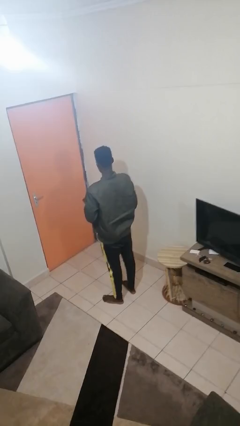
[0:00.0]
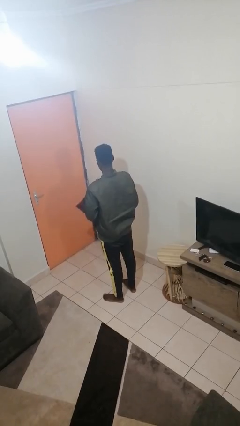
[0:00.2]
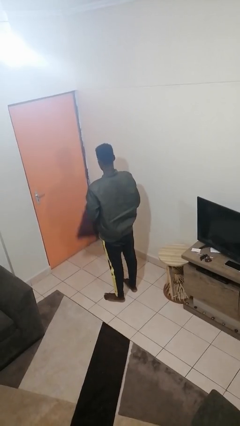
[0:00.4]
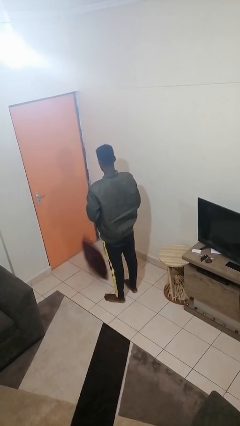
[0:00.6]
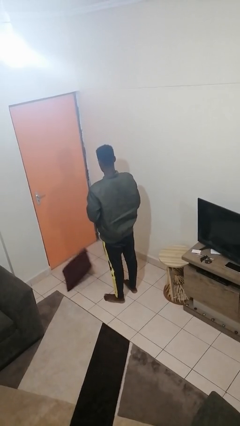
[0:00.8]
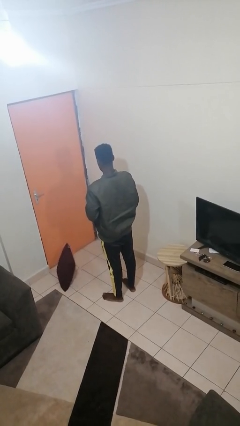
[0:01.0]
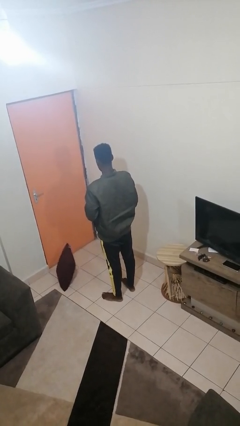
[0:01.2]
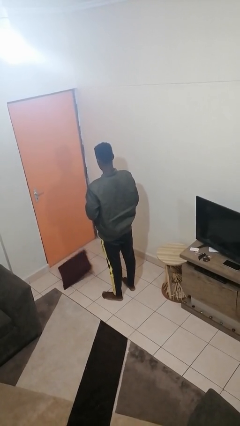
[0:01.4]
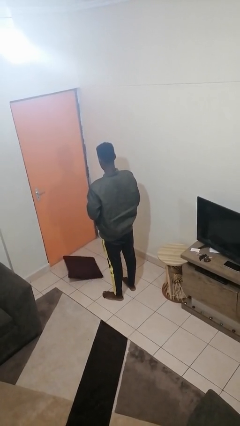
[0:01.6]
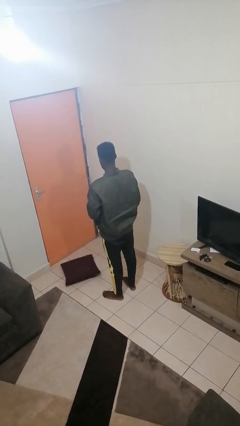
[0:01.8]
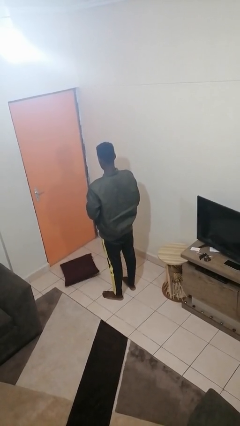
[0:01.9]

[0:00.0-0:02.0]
person drops object

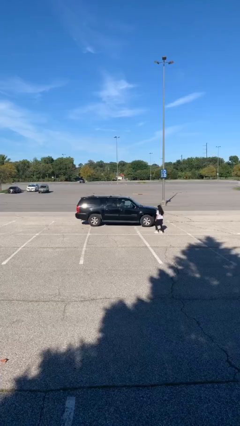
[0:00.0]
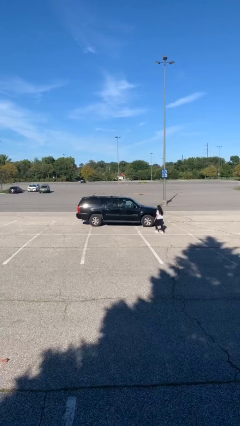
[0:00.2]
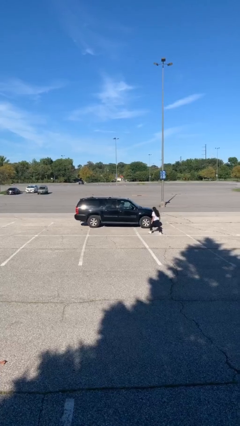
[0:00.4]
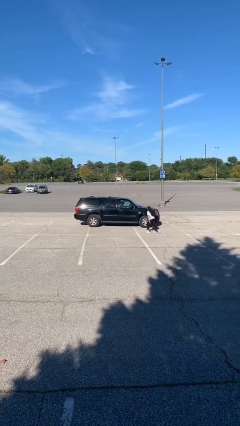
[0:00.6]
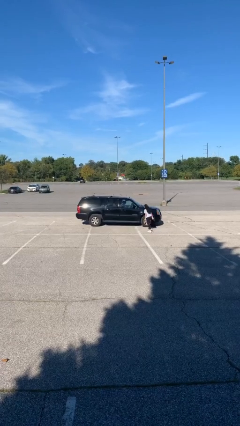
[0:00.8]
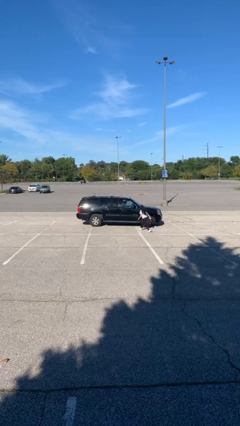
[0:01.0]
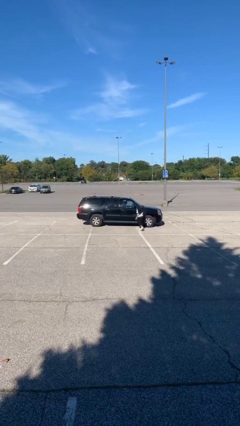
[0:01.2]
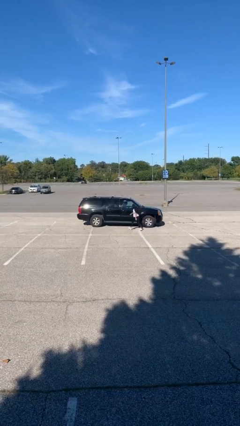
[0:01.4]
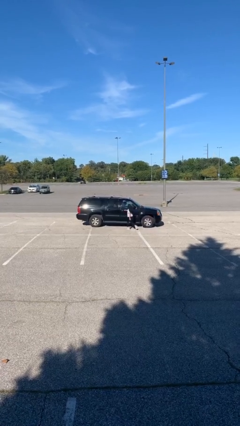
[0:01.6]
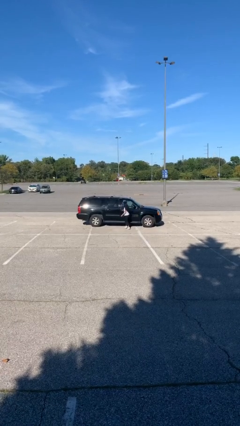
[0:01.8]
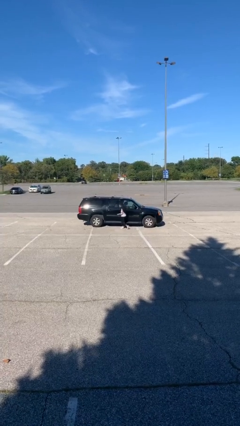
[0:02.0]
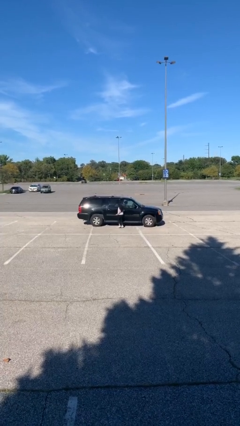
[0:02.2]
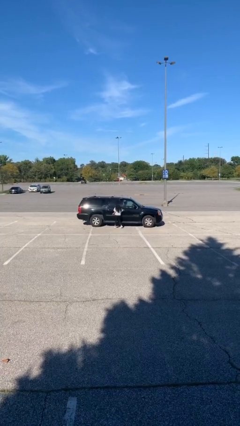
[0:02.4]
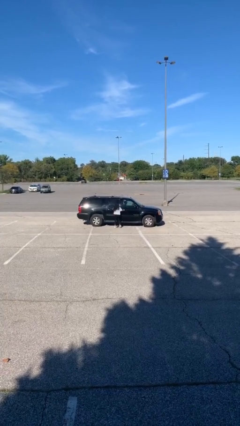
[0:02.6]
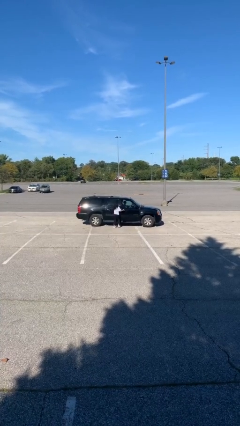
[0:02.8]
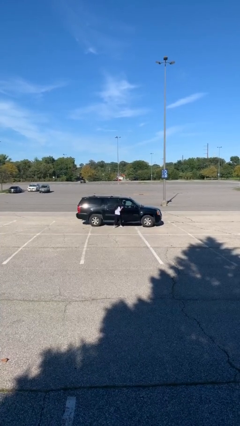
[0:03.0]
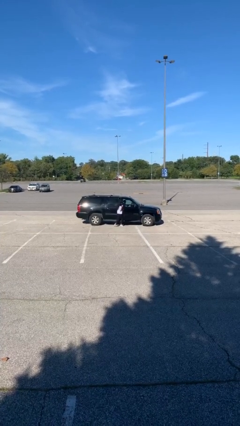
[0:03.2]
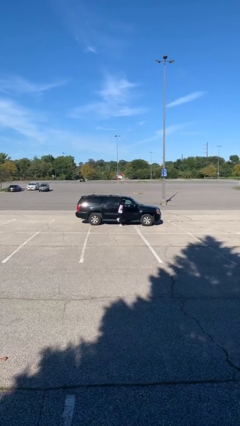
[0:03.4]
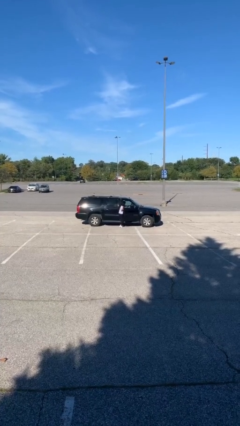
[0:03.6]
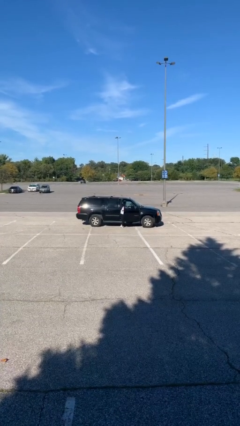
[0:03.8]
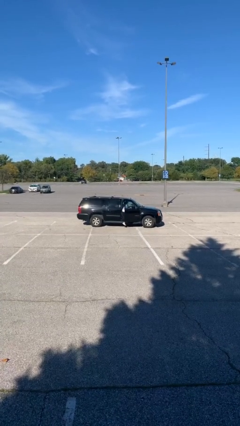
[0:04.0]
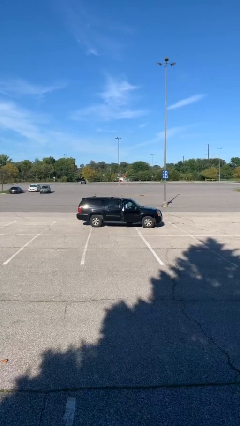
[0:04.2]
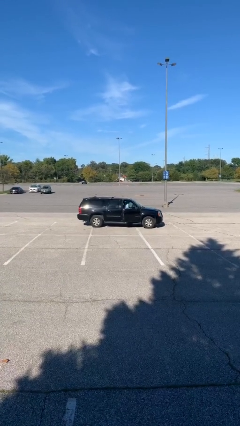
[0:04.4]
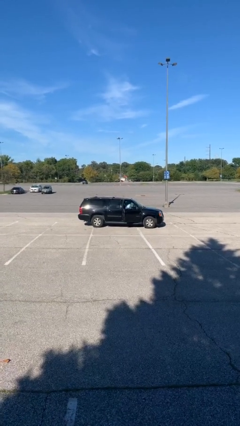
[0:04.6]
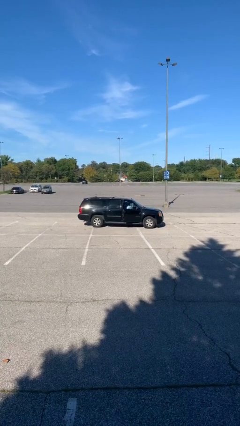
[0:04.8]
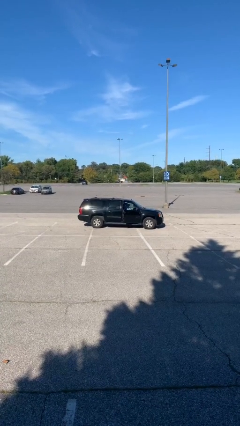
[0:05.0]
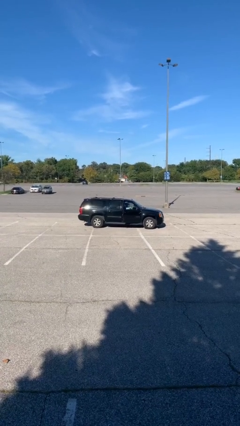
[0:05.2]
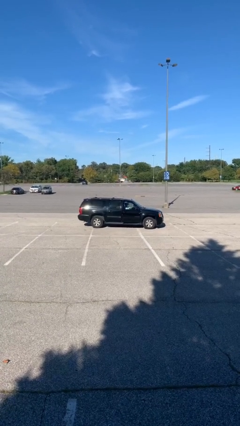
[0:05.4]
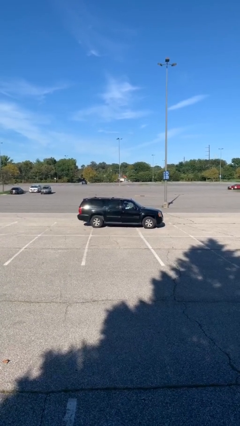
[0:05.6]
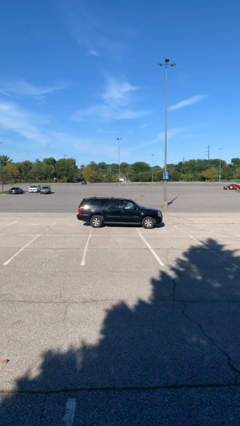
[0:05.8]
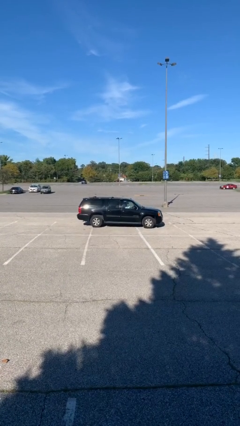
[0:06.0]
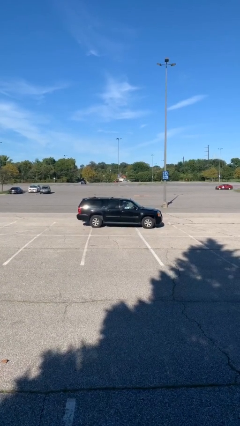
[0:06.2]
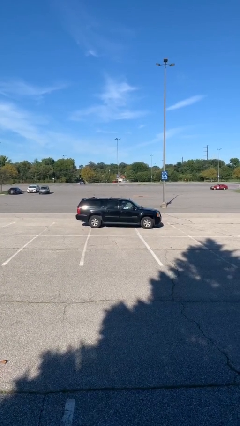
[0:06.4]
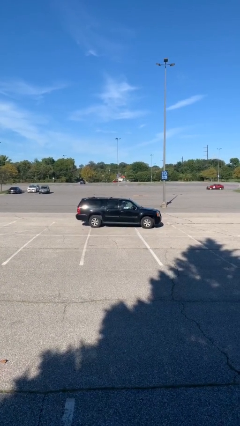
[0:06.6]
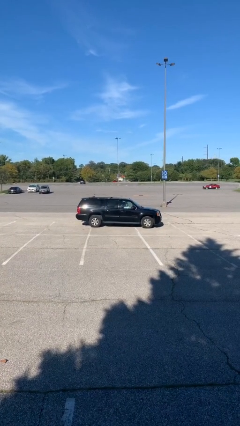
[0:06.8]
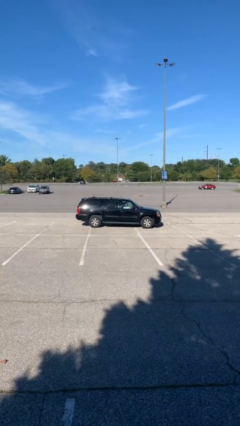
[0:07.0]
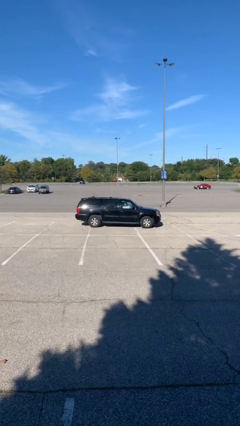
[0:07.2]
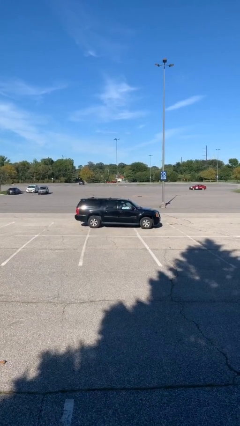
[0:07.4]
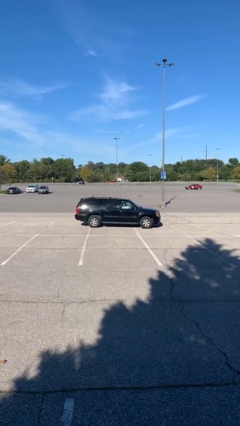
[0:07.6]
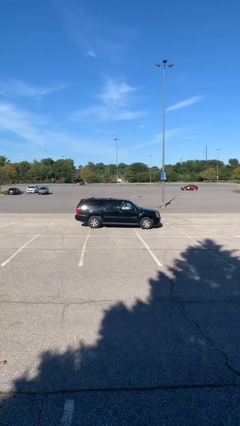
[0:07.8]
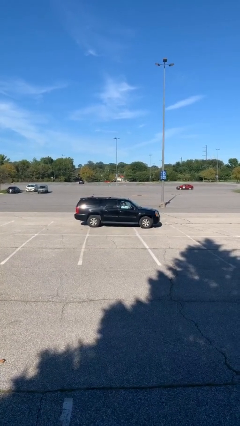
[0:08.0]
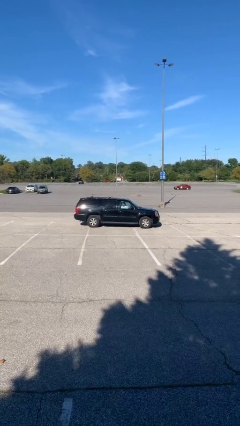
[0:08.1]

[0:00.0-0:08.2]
car picks up person

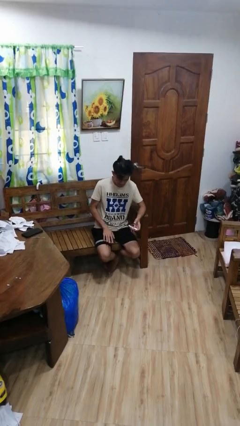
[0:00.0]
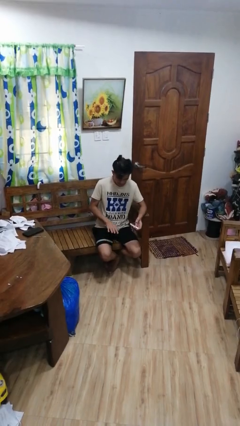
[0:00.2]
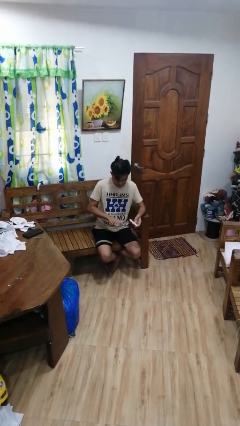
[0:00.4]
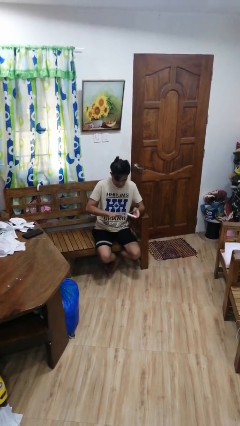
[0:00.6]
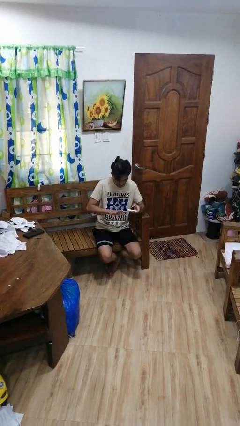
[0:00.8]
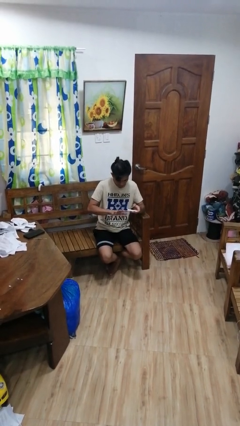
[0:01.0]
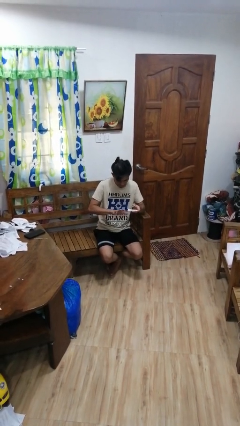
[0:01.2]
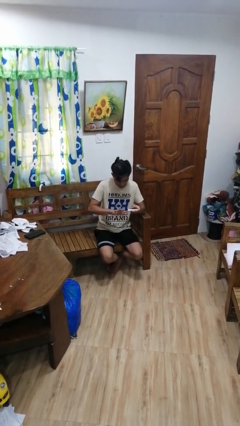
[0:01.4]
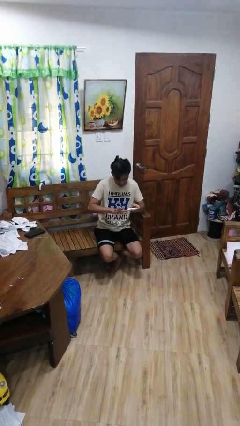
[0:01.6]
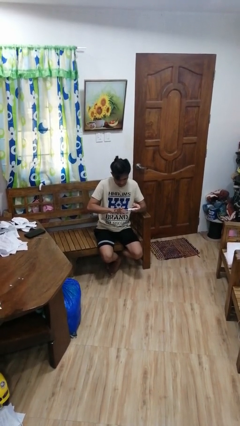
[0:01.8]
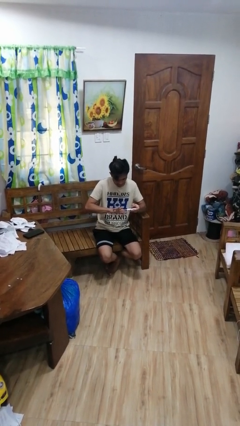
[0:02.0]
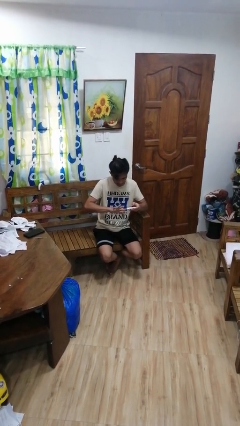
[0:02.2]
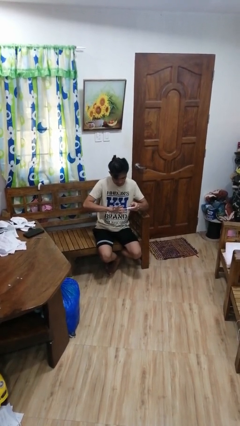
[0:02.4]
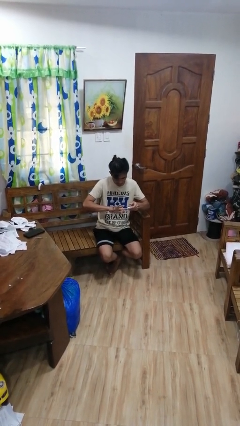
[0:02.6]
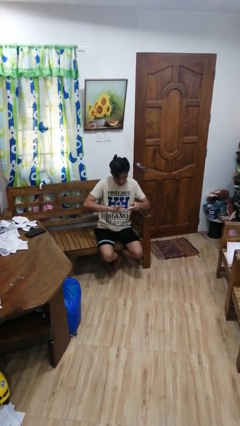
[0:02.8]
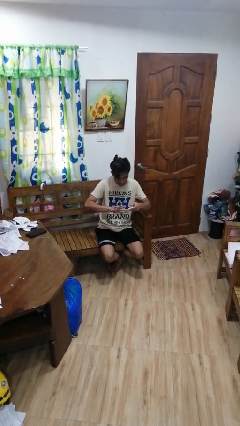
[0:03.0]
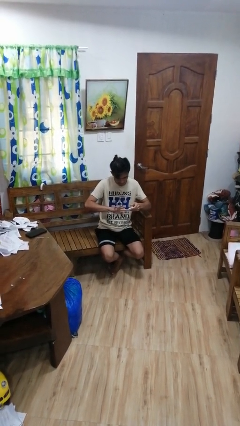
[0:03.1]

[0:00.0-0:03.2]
person clips fingernails

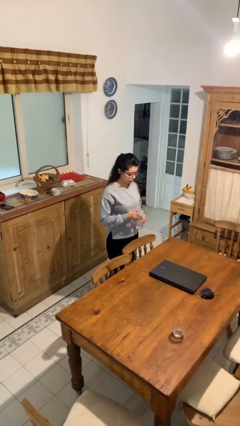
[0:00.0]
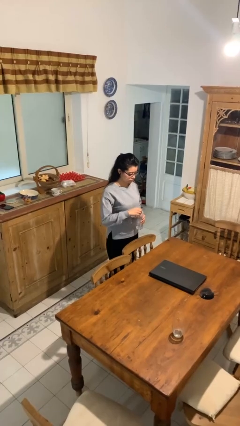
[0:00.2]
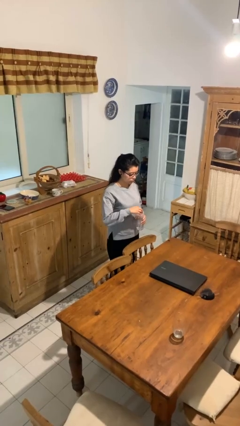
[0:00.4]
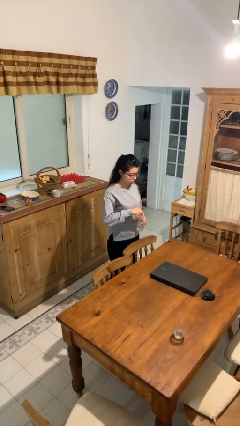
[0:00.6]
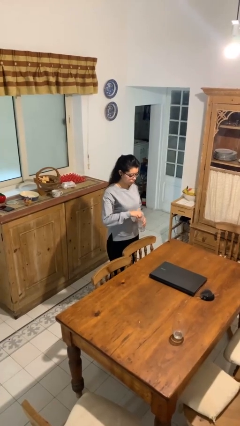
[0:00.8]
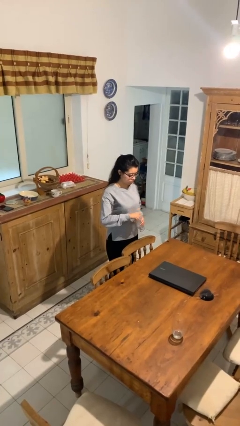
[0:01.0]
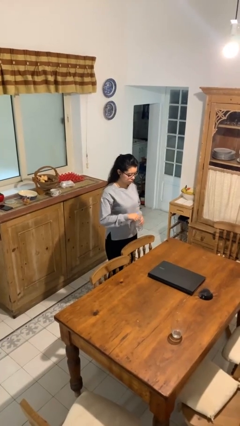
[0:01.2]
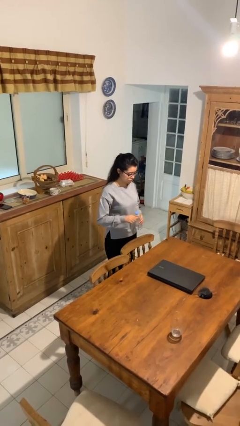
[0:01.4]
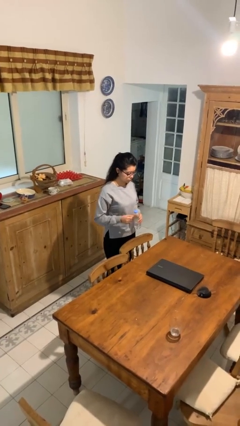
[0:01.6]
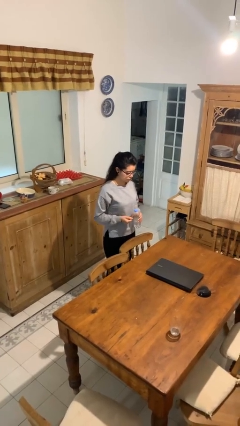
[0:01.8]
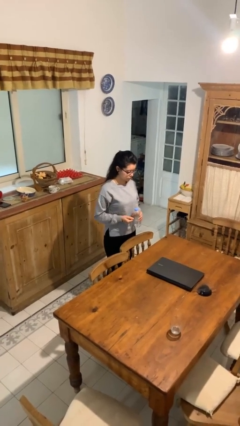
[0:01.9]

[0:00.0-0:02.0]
person screws lid to bottle

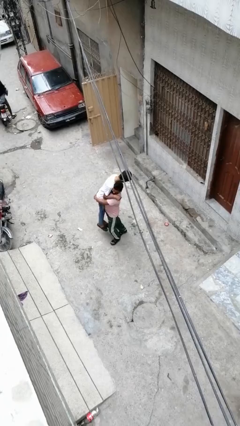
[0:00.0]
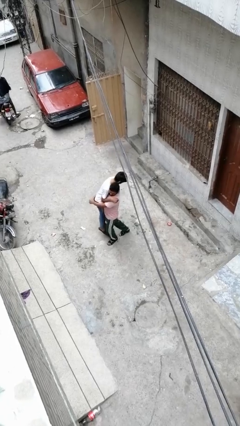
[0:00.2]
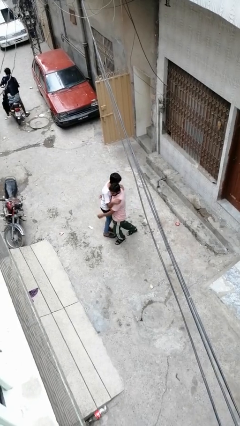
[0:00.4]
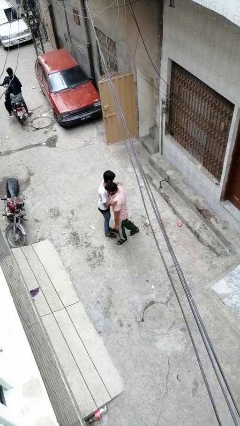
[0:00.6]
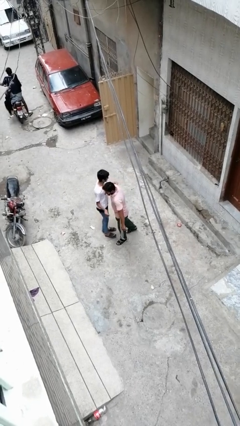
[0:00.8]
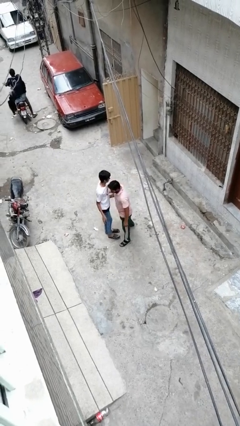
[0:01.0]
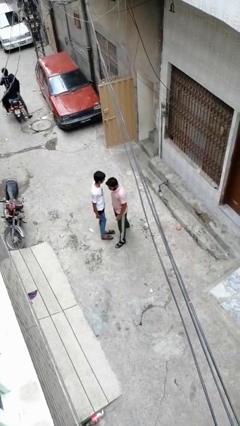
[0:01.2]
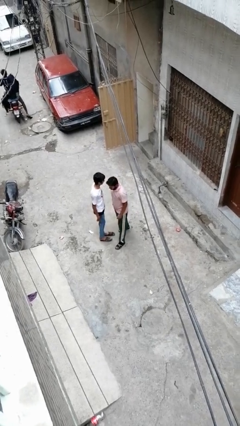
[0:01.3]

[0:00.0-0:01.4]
person puts down person

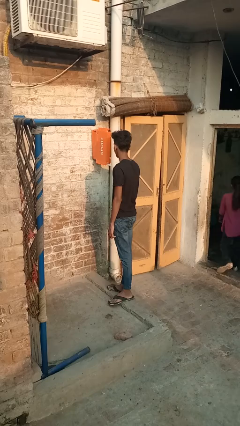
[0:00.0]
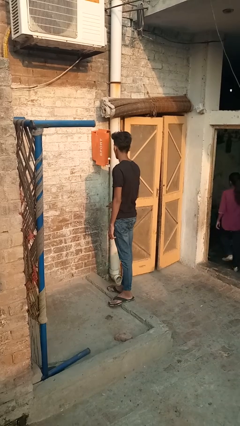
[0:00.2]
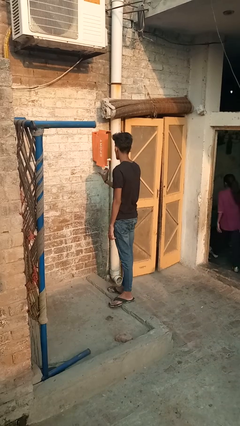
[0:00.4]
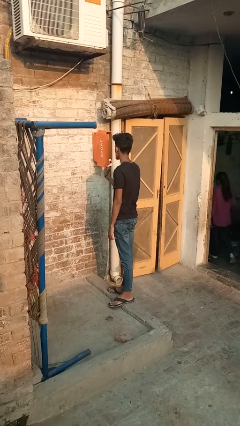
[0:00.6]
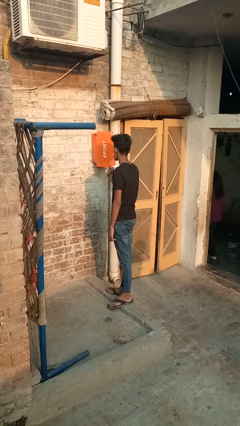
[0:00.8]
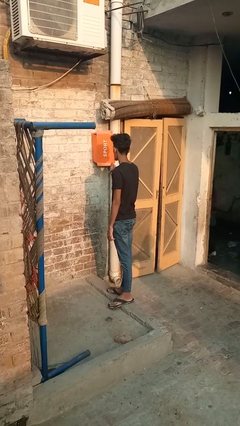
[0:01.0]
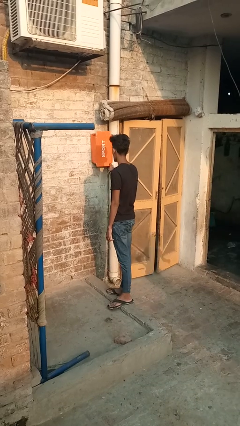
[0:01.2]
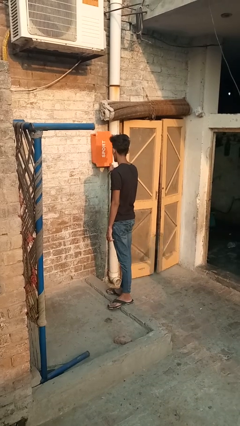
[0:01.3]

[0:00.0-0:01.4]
person opens mailbox
